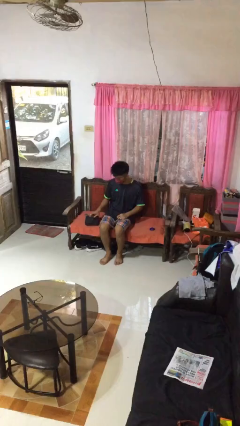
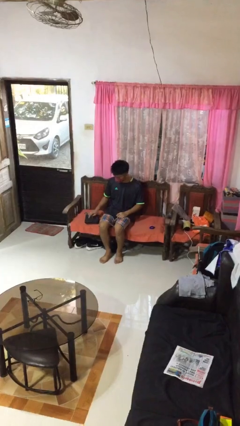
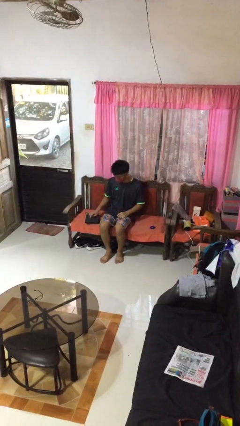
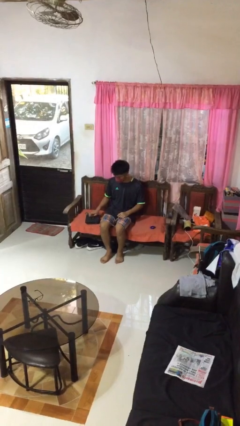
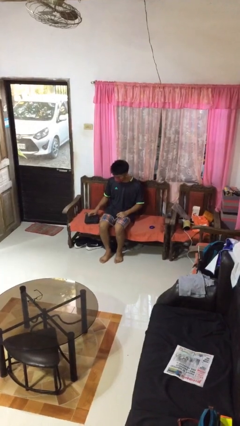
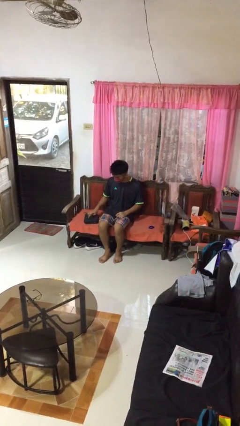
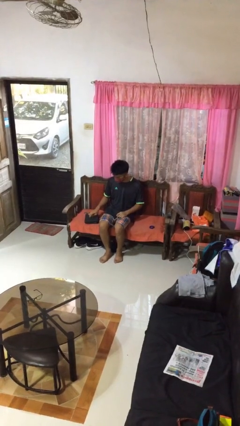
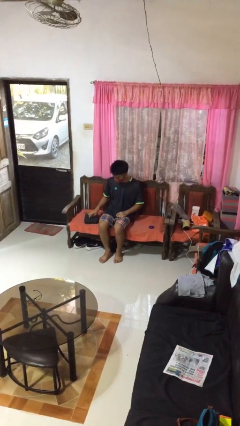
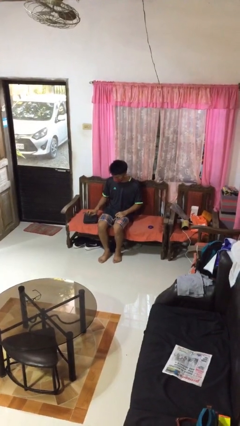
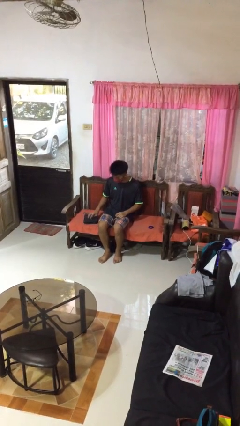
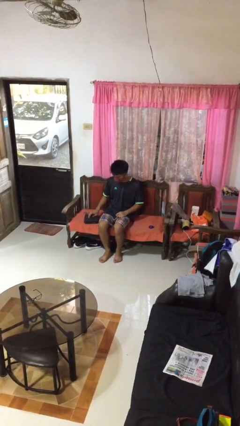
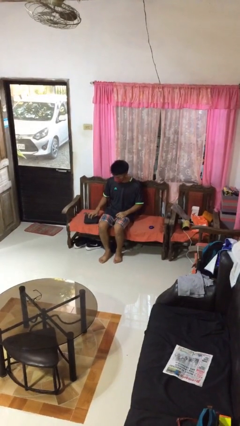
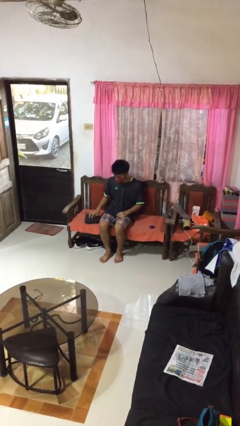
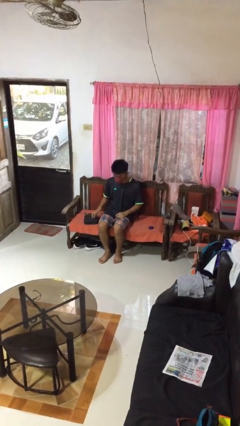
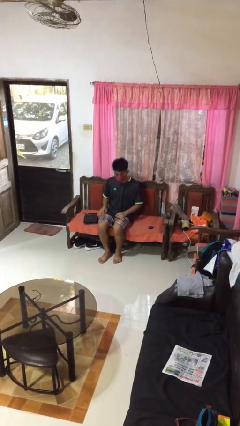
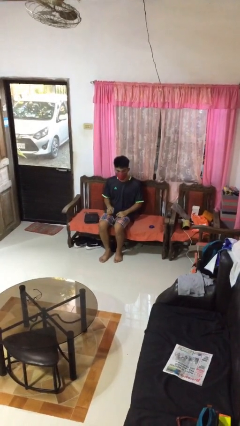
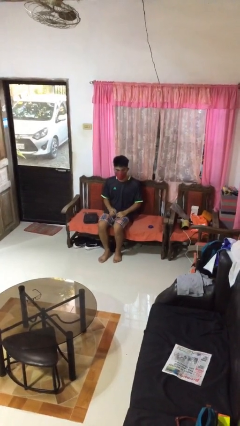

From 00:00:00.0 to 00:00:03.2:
person taps object with finger

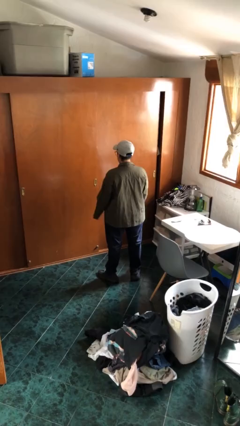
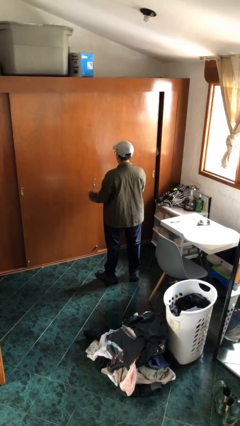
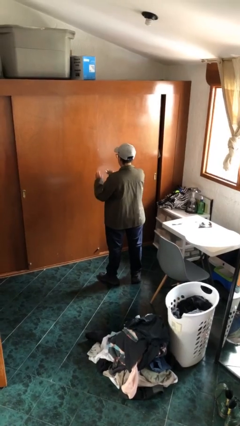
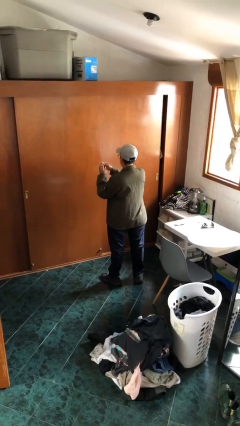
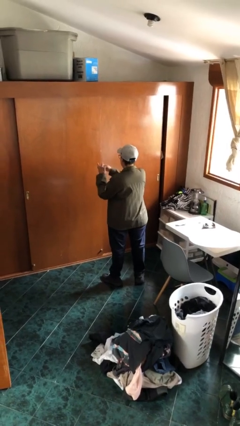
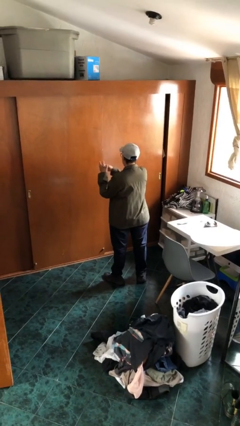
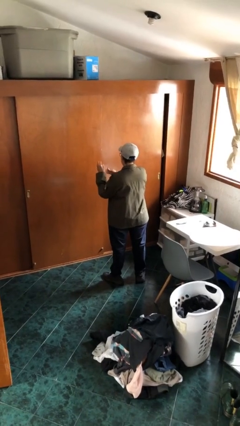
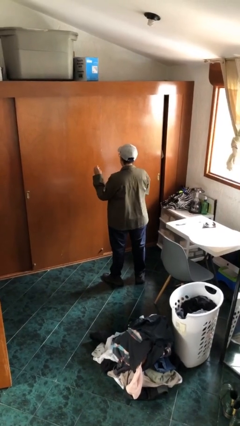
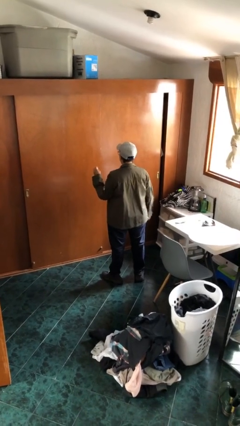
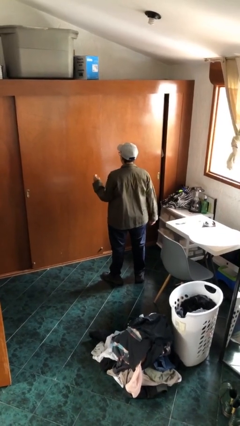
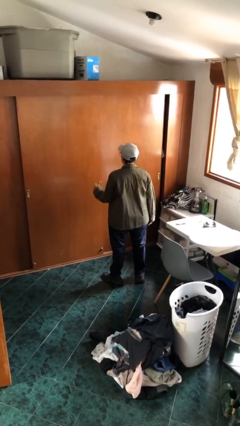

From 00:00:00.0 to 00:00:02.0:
person puts on ring

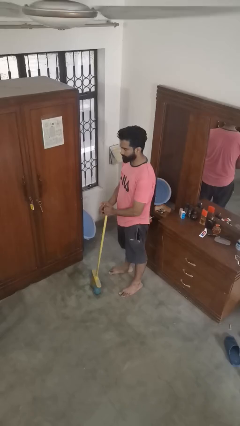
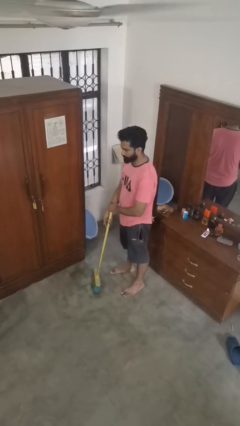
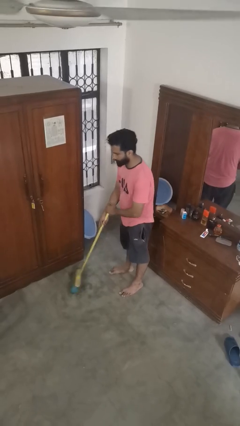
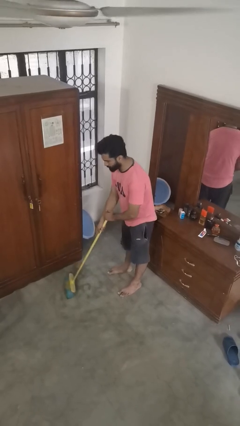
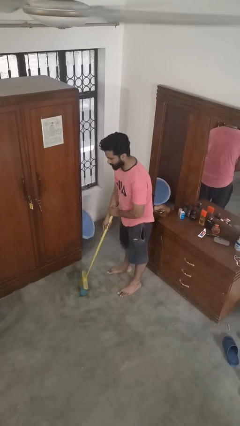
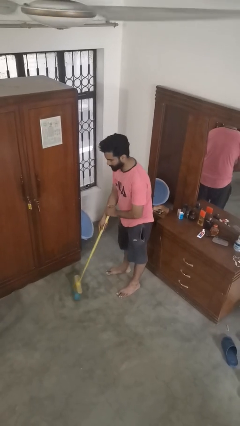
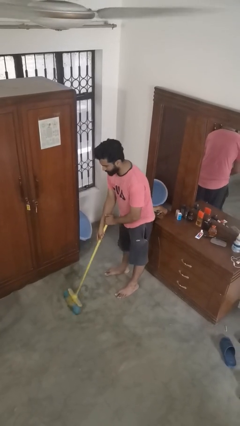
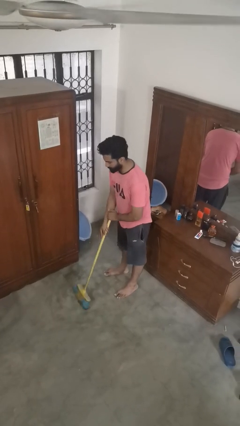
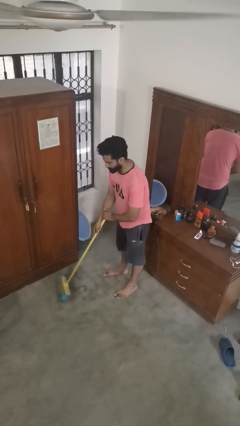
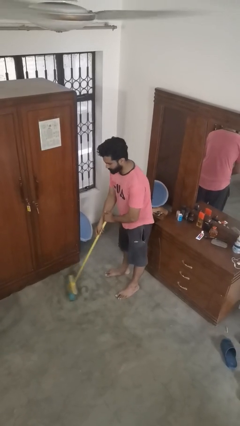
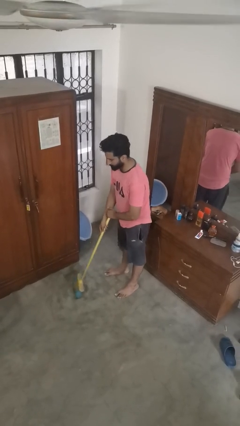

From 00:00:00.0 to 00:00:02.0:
person sweeps floor

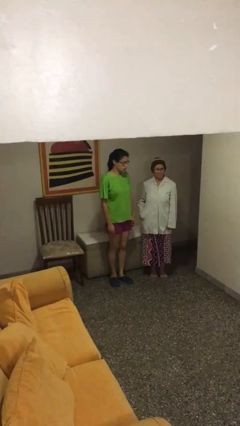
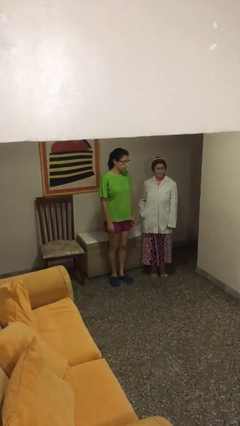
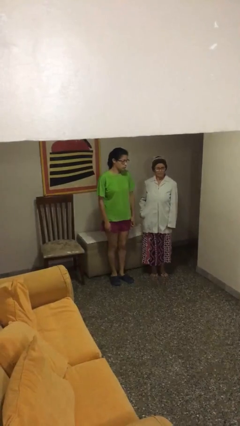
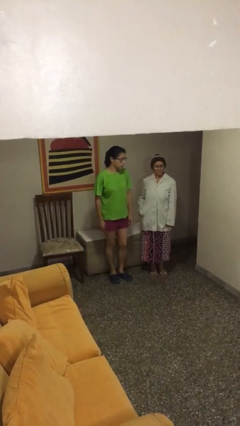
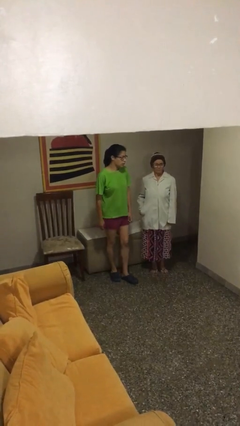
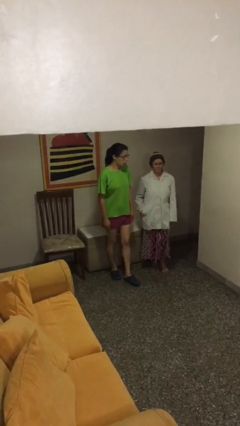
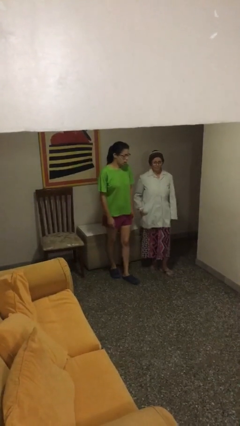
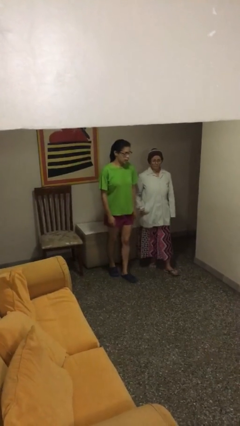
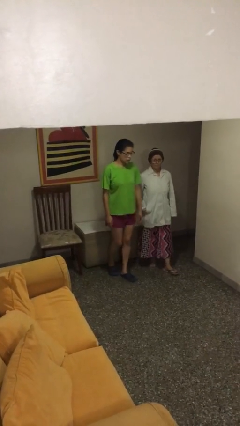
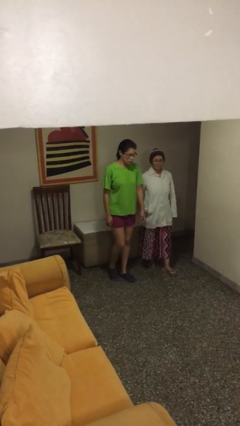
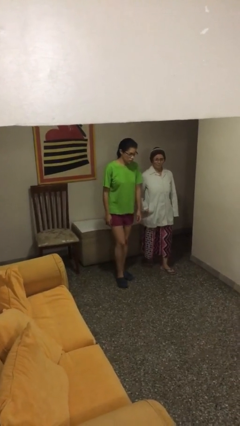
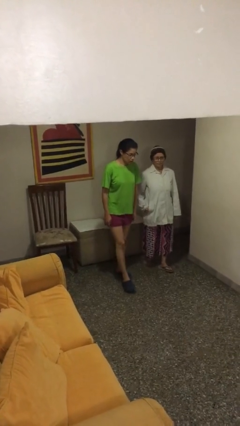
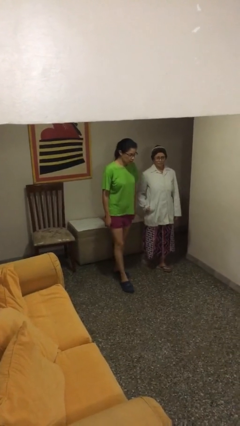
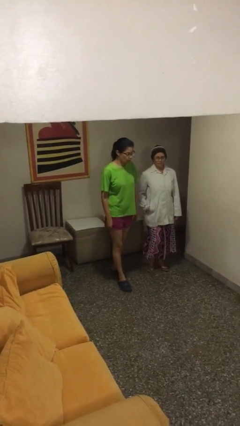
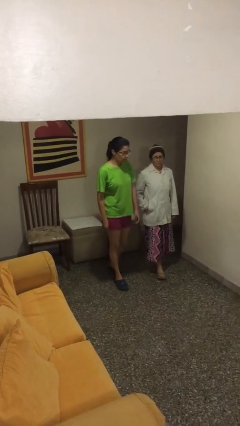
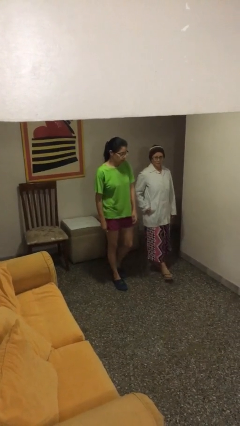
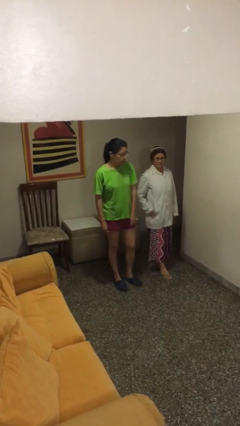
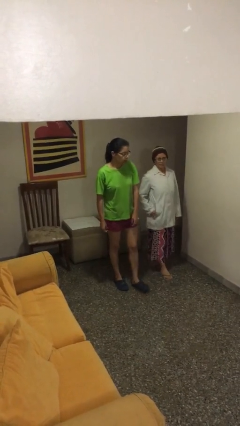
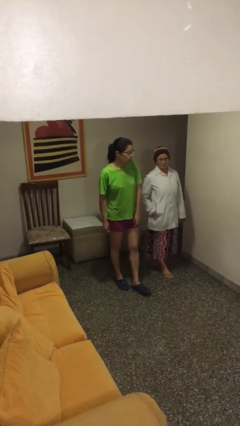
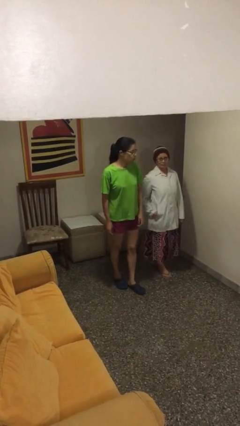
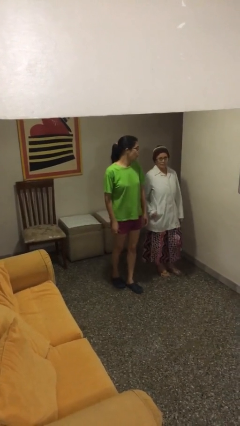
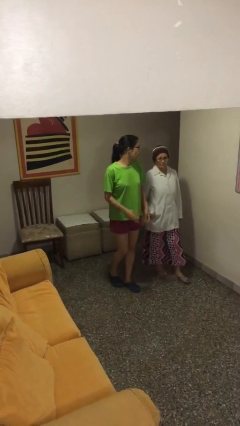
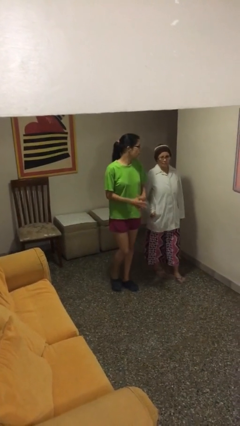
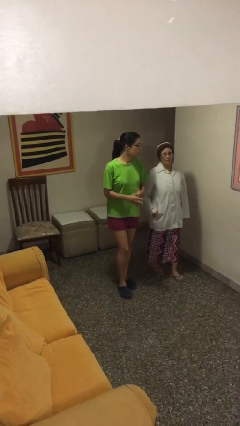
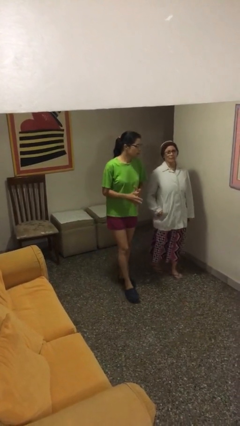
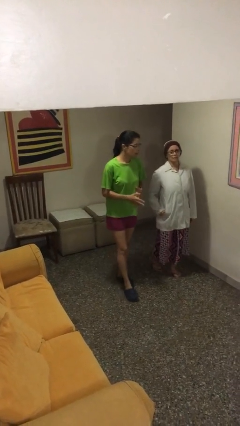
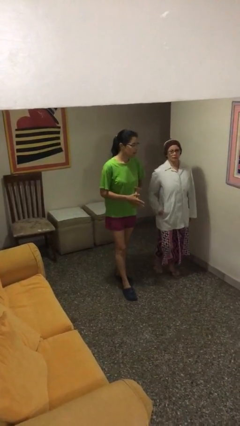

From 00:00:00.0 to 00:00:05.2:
person talks to person

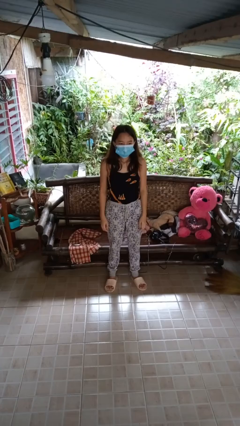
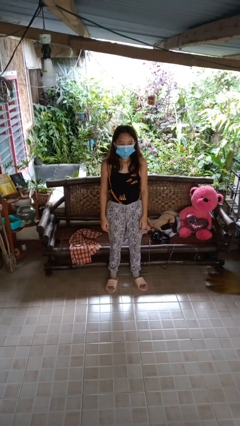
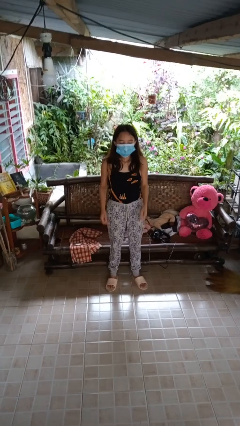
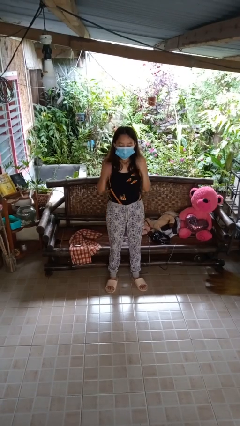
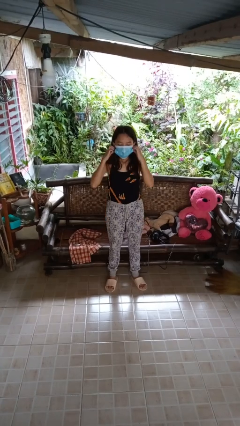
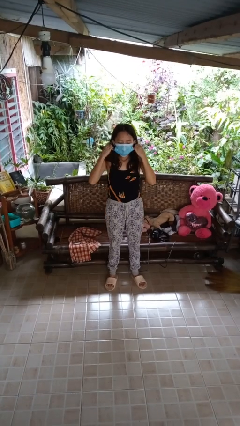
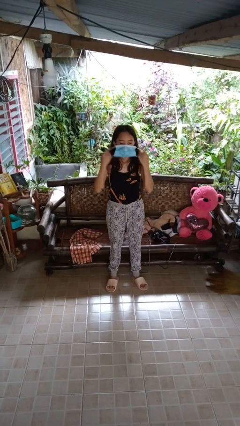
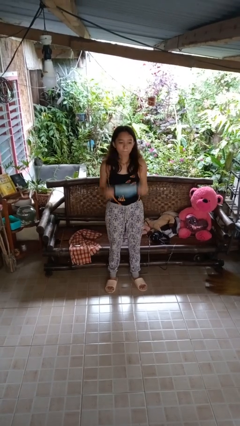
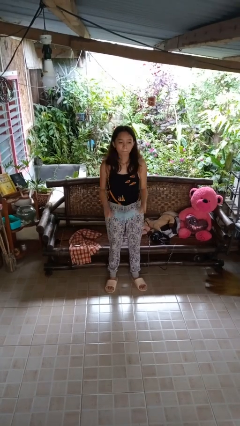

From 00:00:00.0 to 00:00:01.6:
person takes off facemask

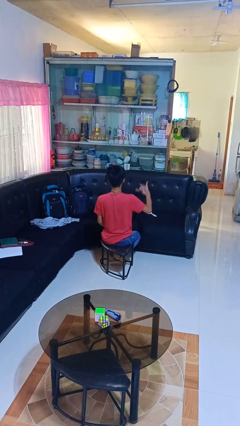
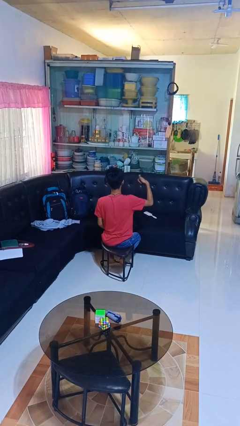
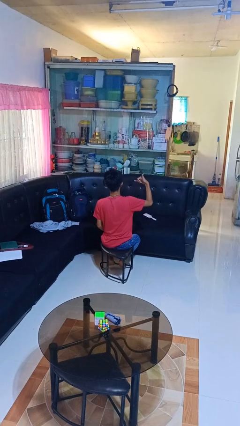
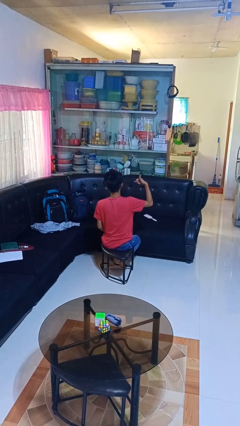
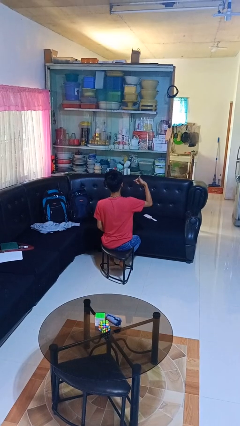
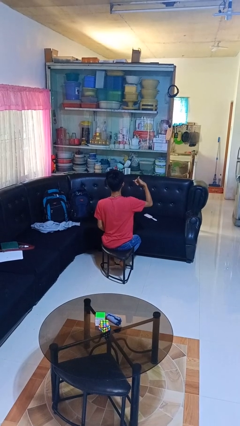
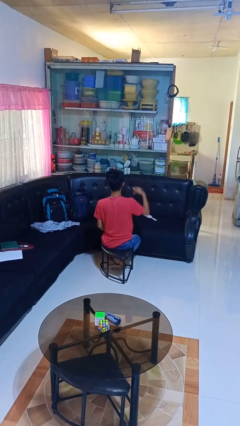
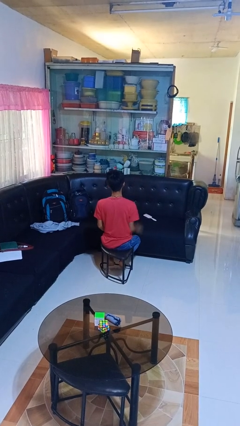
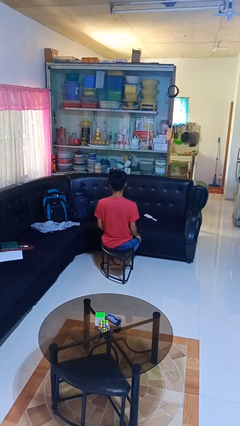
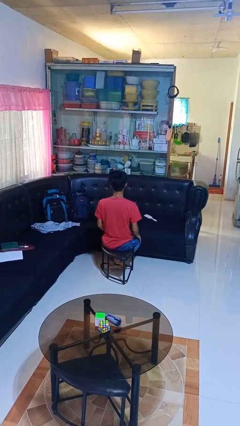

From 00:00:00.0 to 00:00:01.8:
person gestures hang loose

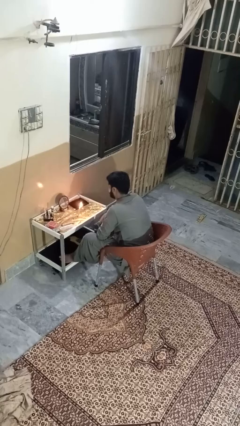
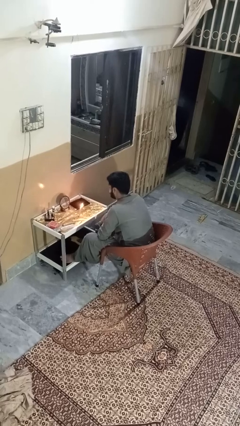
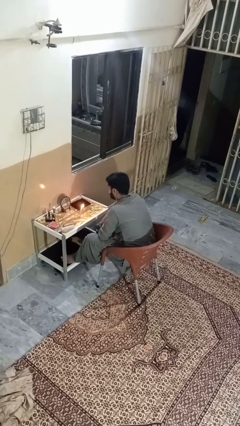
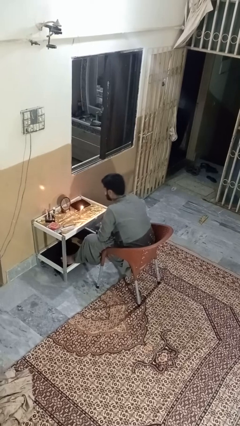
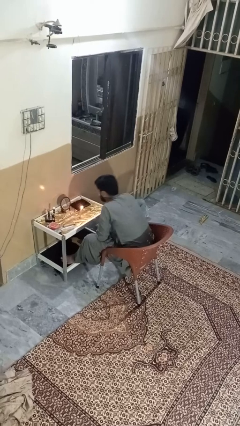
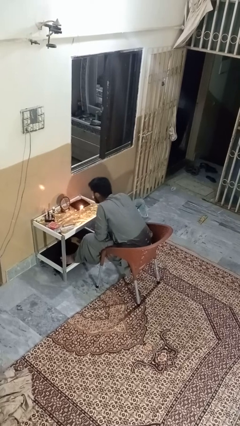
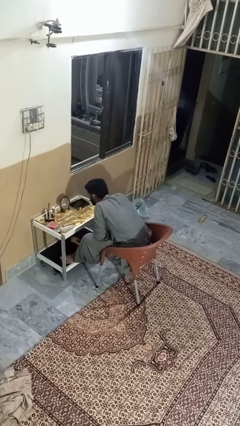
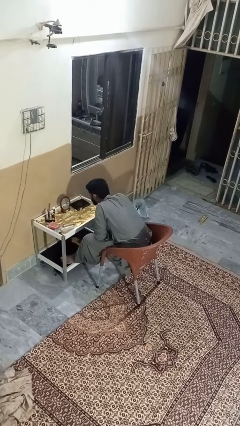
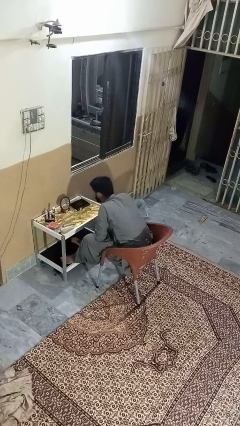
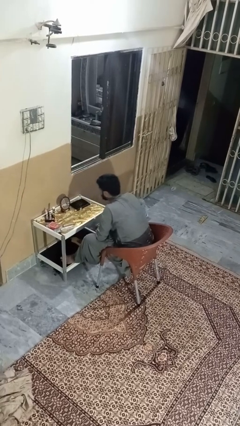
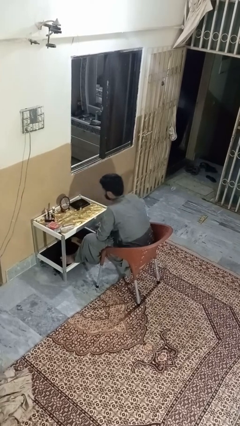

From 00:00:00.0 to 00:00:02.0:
person extinguishes candle
